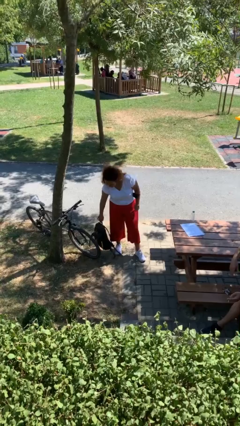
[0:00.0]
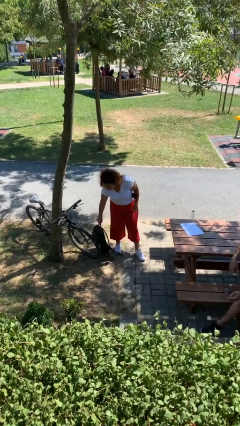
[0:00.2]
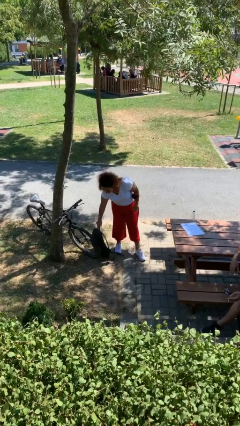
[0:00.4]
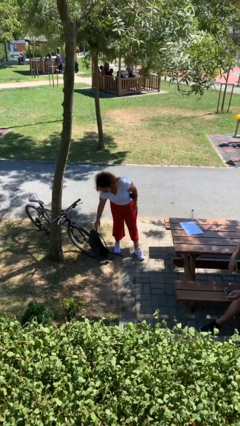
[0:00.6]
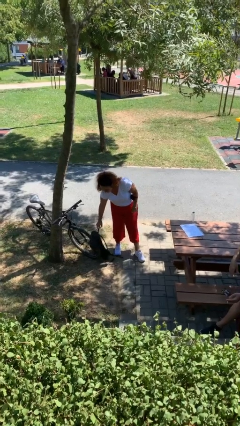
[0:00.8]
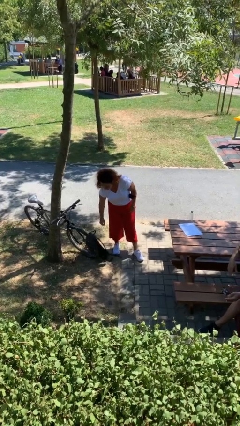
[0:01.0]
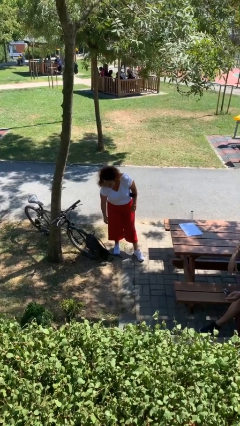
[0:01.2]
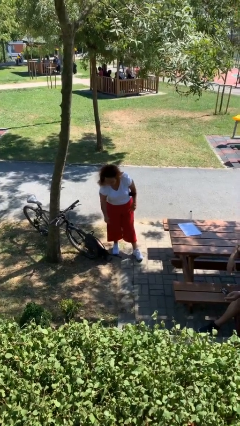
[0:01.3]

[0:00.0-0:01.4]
person puts down object on floor

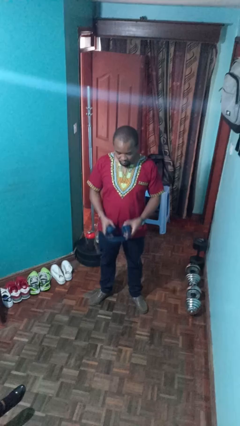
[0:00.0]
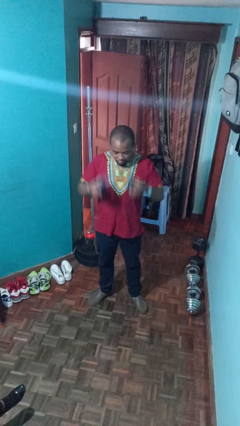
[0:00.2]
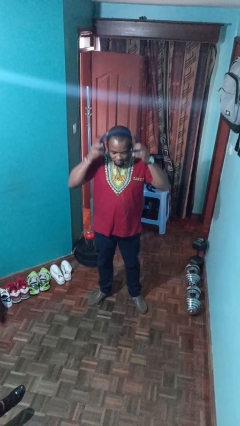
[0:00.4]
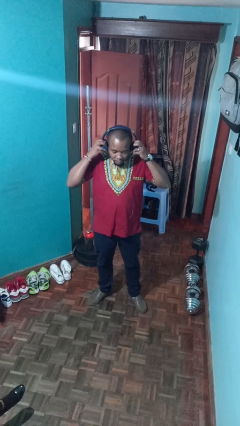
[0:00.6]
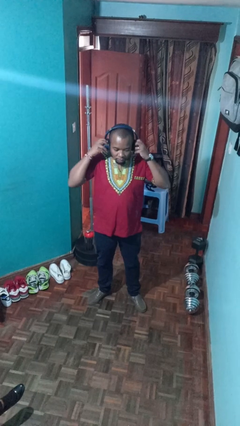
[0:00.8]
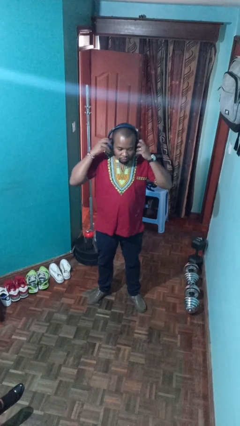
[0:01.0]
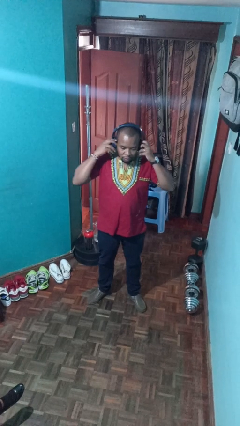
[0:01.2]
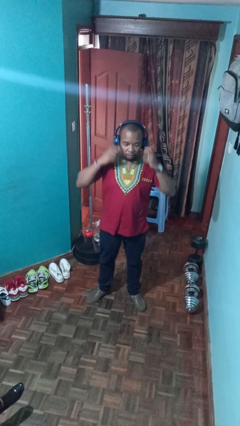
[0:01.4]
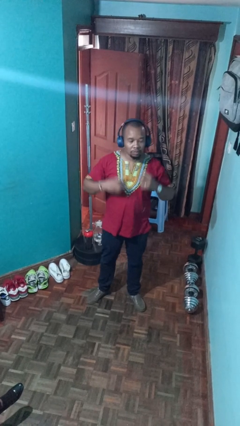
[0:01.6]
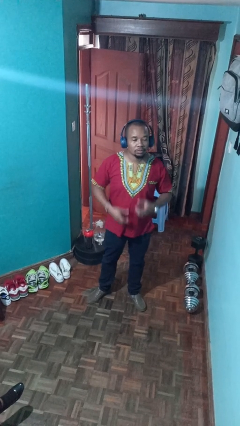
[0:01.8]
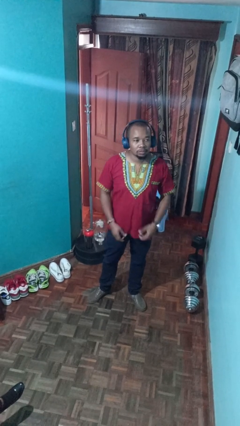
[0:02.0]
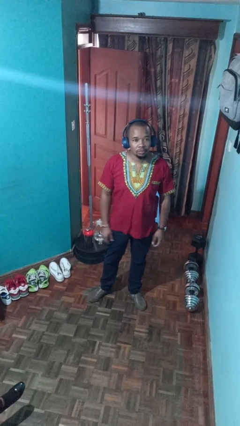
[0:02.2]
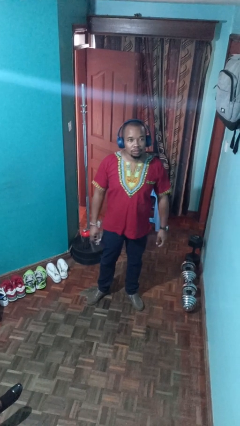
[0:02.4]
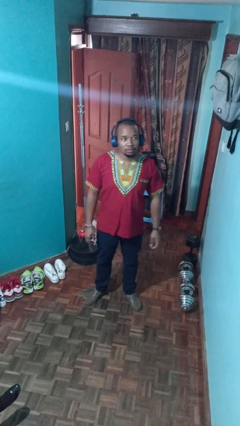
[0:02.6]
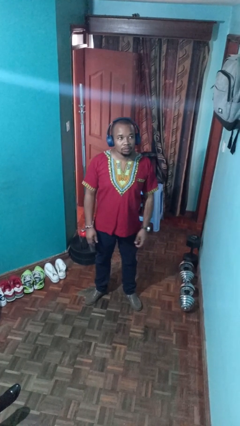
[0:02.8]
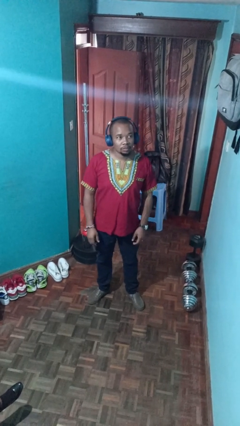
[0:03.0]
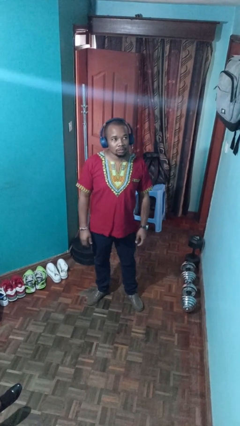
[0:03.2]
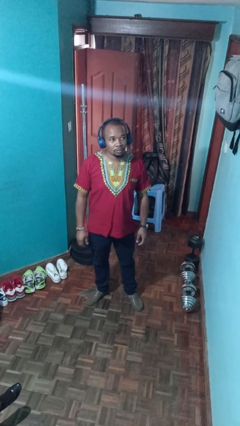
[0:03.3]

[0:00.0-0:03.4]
person puts on headphones

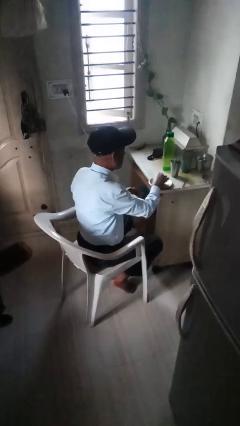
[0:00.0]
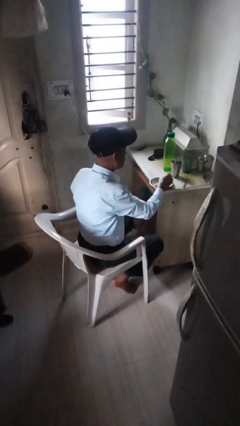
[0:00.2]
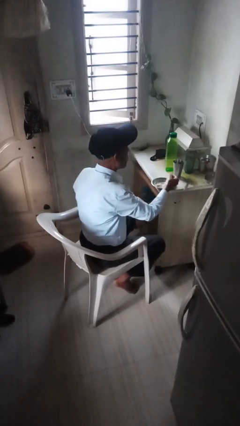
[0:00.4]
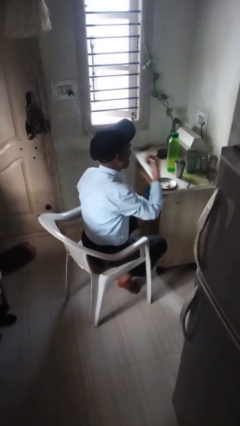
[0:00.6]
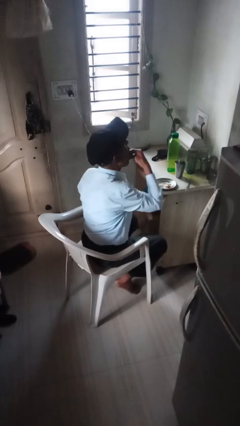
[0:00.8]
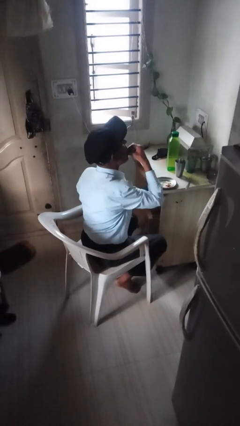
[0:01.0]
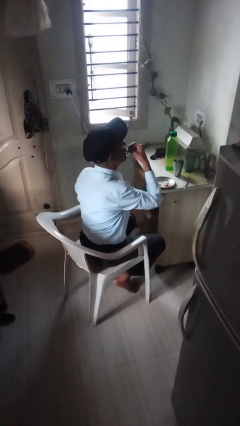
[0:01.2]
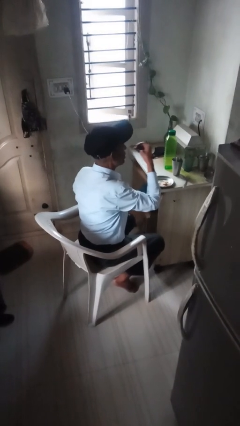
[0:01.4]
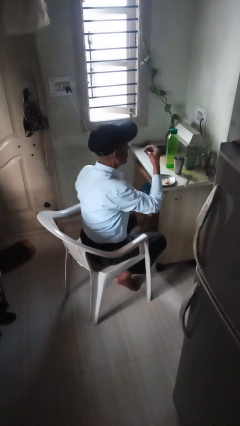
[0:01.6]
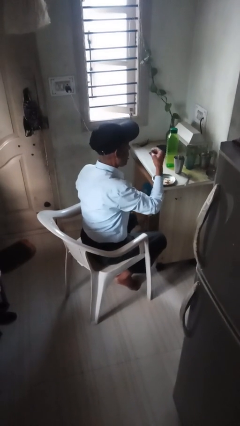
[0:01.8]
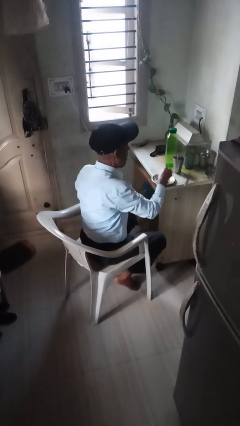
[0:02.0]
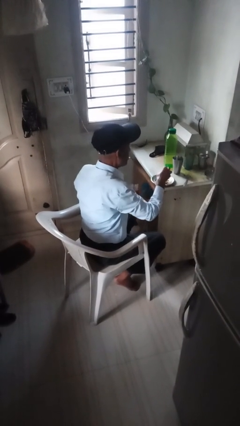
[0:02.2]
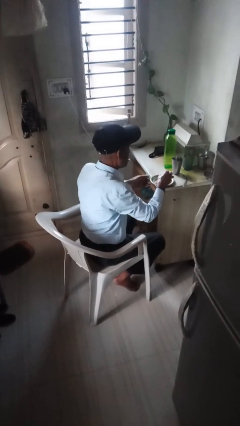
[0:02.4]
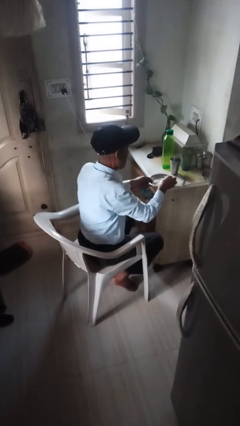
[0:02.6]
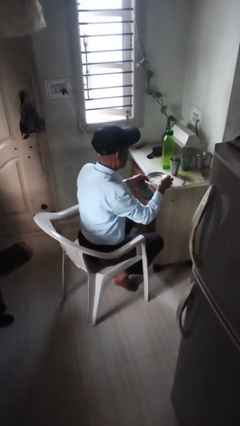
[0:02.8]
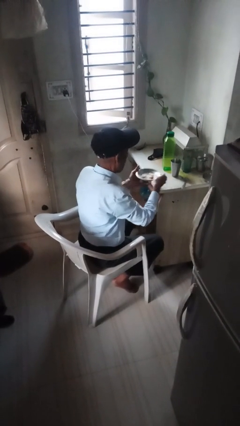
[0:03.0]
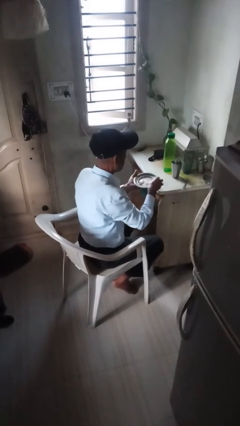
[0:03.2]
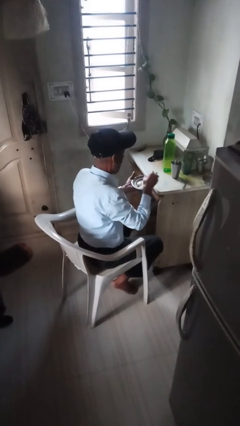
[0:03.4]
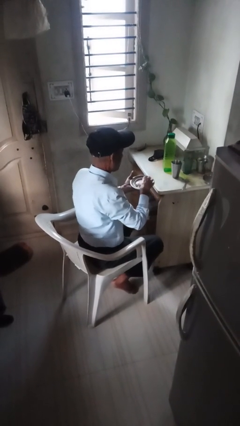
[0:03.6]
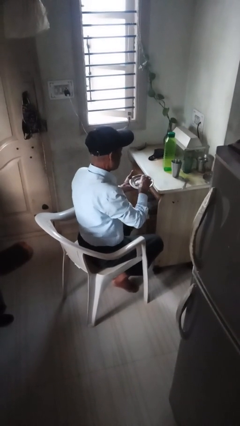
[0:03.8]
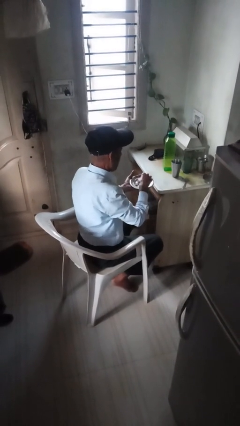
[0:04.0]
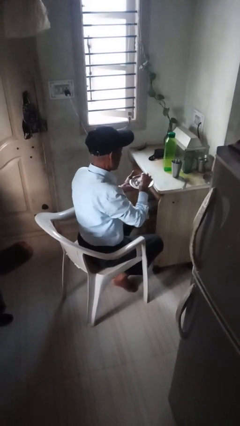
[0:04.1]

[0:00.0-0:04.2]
person eats with hands

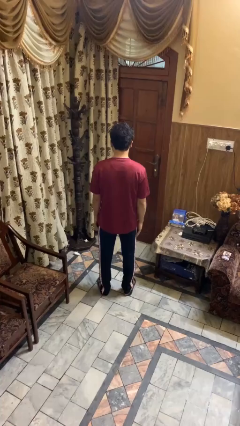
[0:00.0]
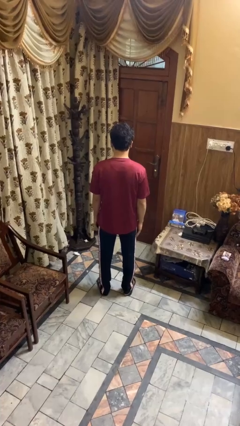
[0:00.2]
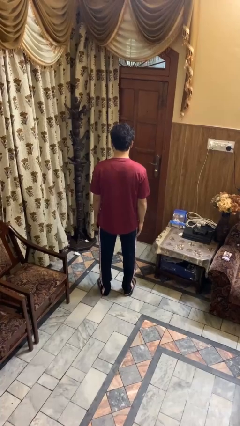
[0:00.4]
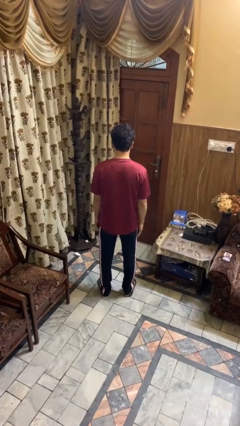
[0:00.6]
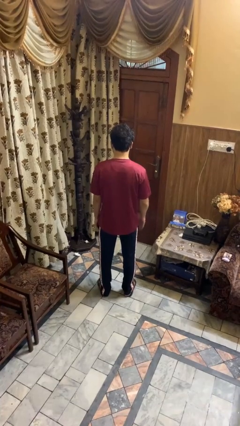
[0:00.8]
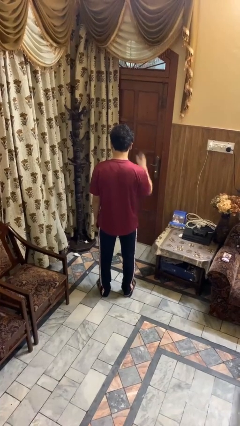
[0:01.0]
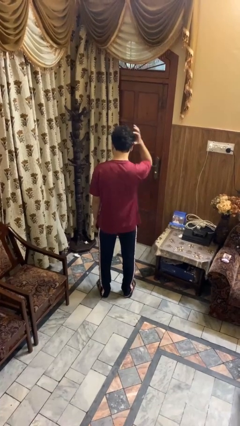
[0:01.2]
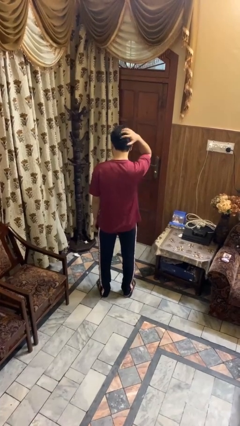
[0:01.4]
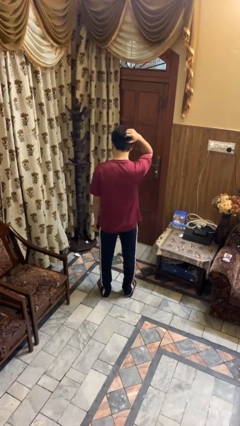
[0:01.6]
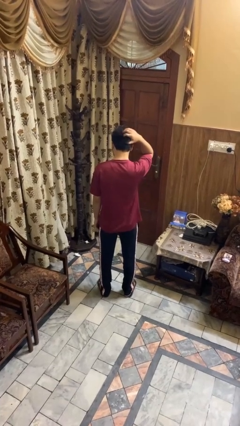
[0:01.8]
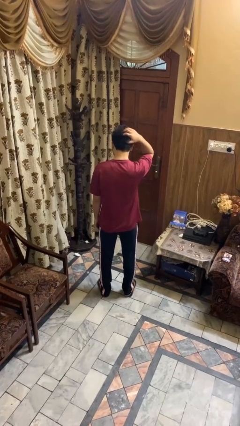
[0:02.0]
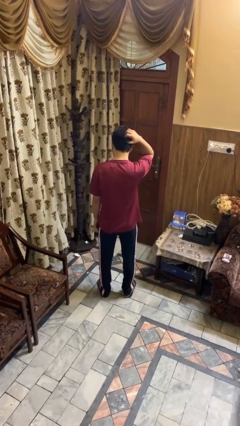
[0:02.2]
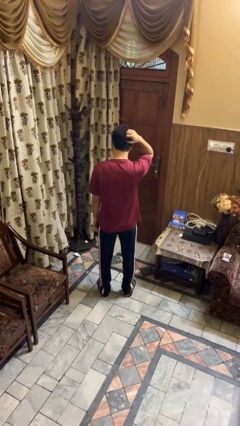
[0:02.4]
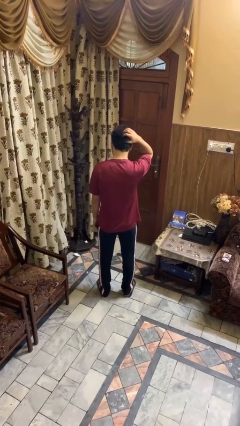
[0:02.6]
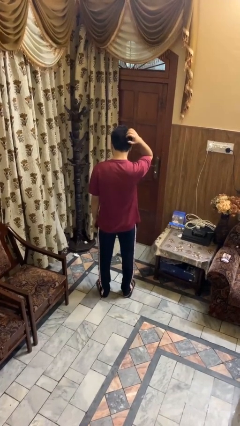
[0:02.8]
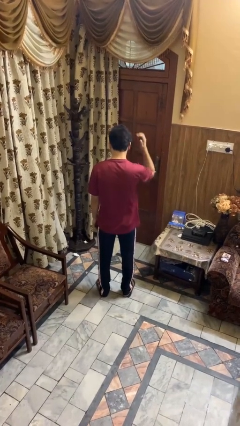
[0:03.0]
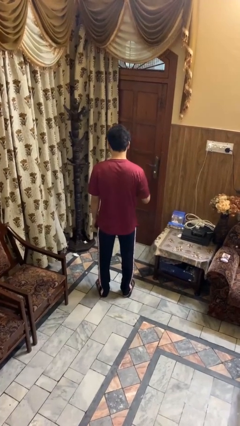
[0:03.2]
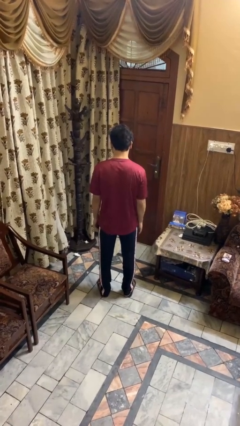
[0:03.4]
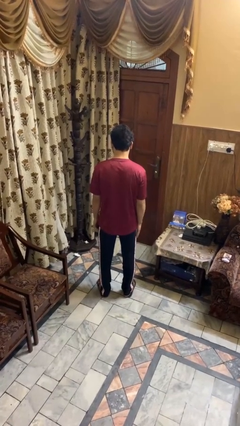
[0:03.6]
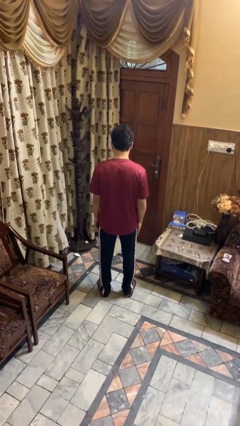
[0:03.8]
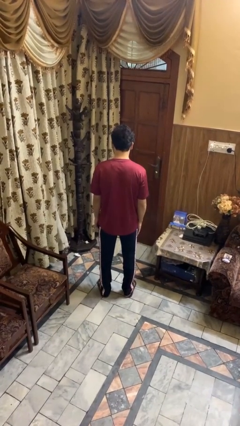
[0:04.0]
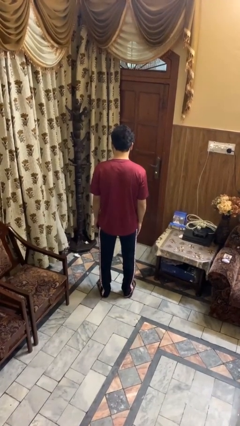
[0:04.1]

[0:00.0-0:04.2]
person scratches face

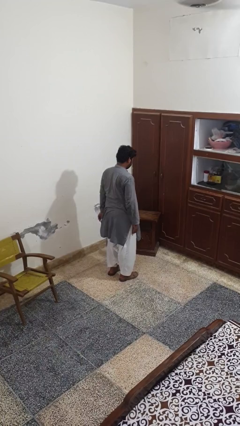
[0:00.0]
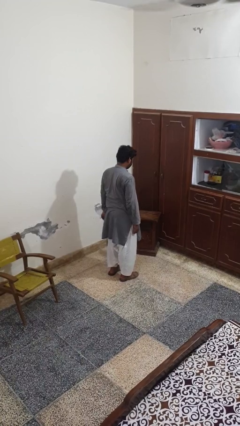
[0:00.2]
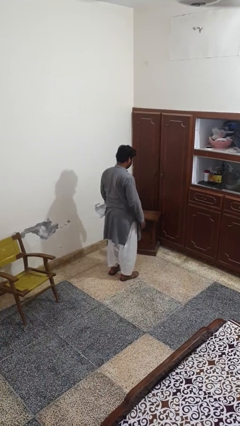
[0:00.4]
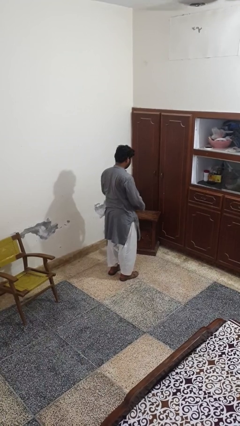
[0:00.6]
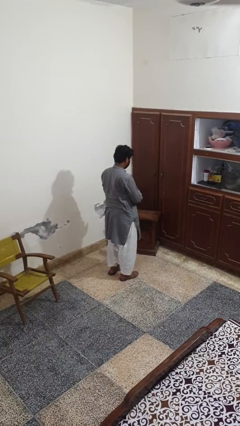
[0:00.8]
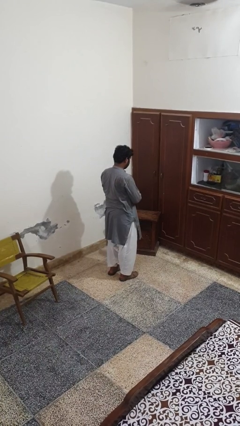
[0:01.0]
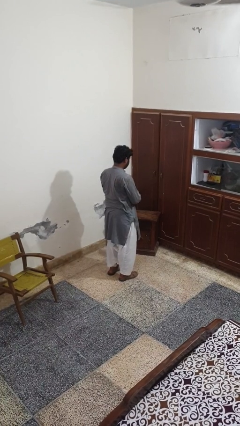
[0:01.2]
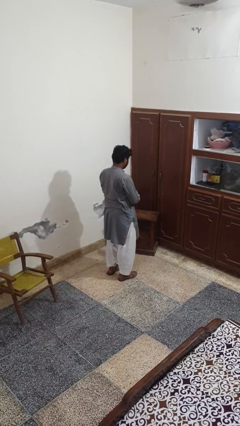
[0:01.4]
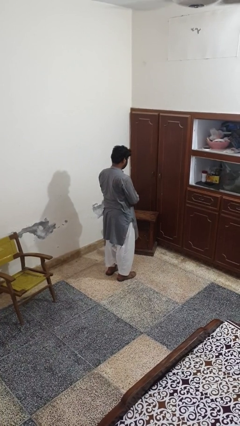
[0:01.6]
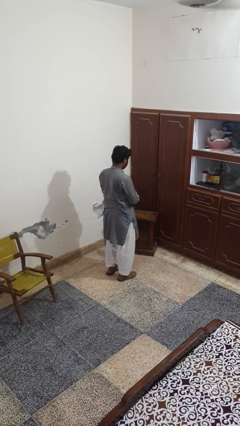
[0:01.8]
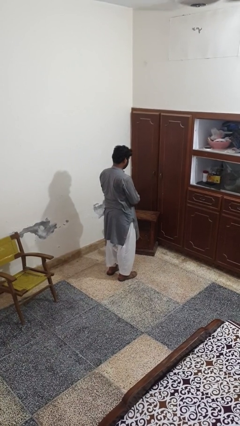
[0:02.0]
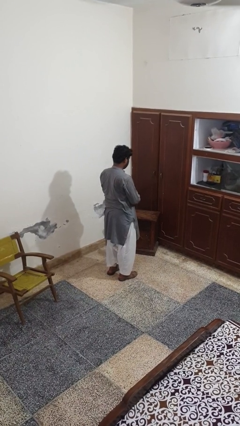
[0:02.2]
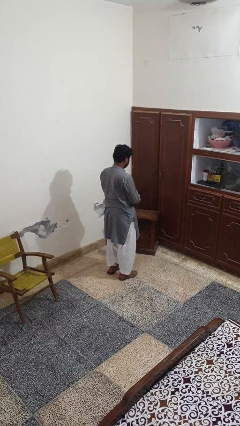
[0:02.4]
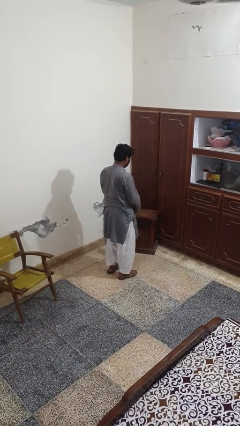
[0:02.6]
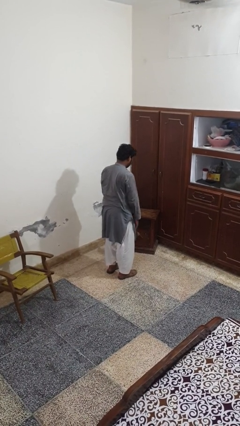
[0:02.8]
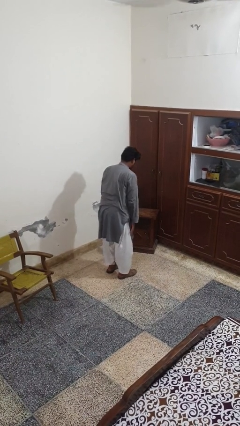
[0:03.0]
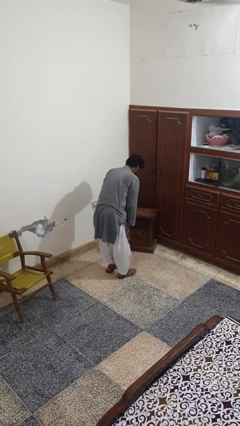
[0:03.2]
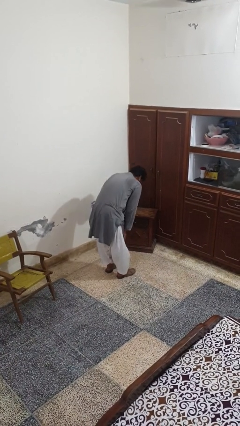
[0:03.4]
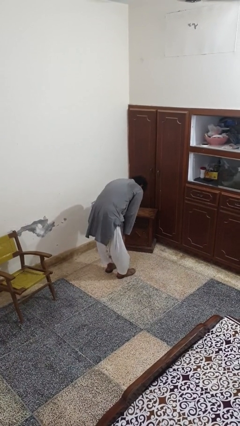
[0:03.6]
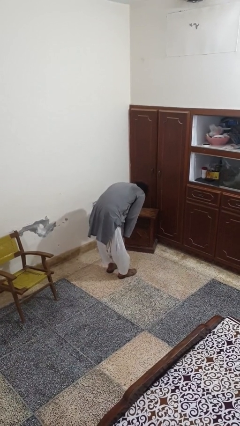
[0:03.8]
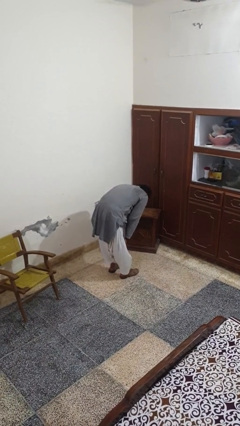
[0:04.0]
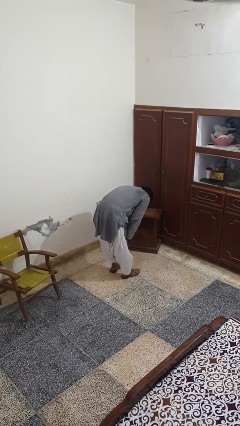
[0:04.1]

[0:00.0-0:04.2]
person prays

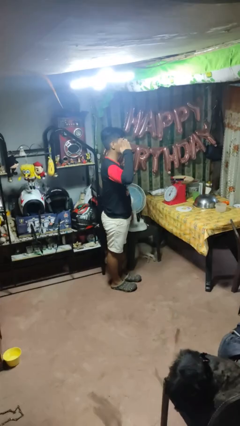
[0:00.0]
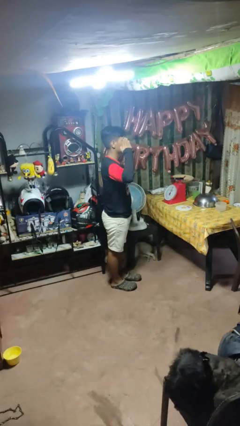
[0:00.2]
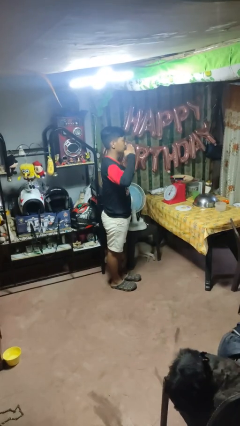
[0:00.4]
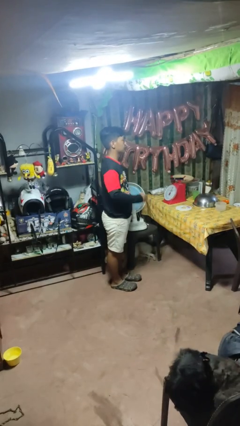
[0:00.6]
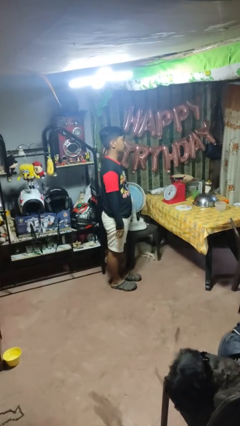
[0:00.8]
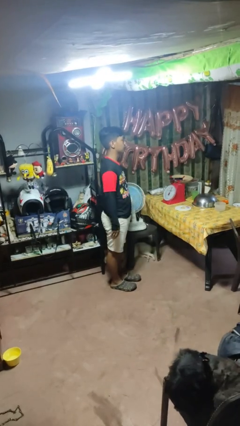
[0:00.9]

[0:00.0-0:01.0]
person salutes
